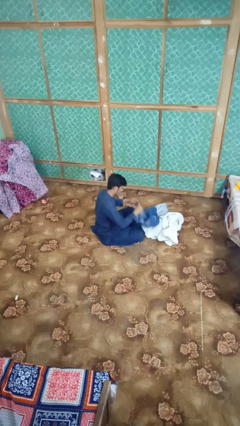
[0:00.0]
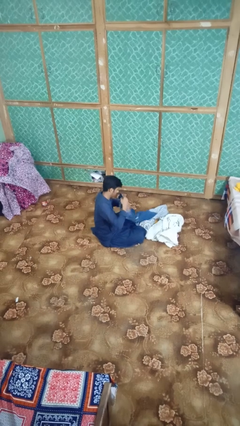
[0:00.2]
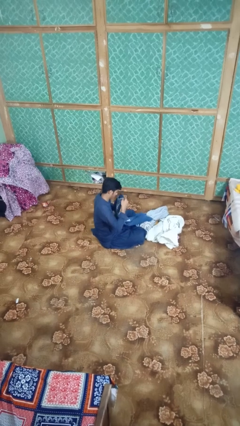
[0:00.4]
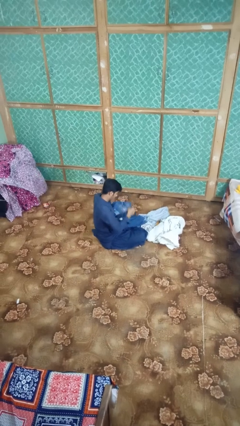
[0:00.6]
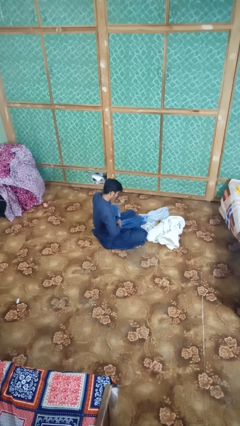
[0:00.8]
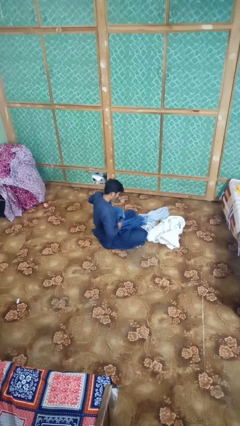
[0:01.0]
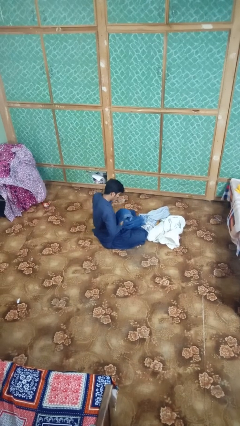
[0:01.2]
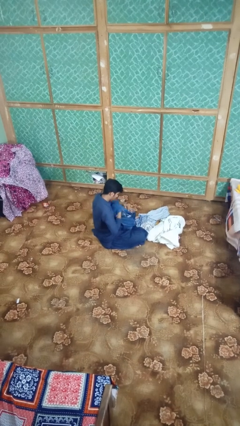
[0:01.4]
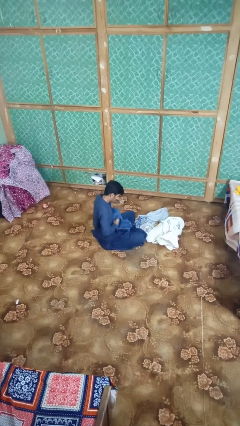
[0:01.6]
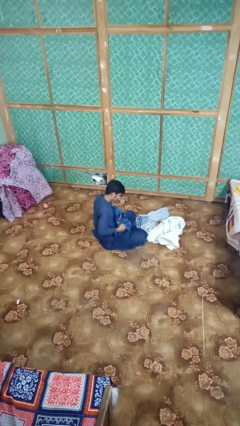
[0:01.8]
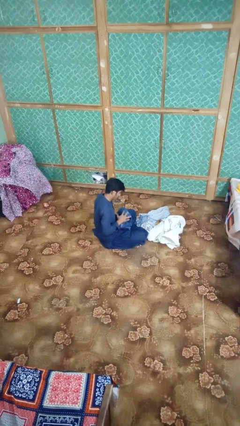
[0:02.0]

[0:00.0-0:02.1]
person folds pants

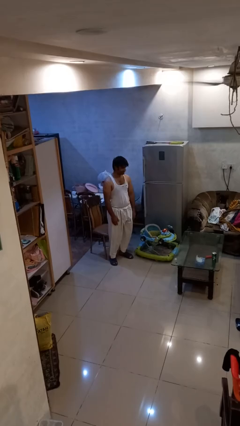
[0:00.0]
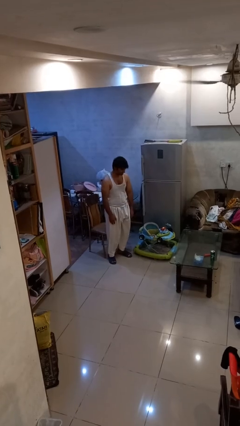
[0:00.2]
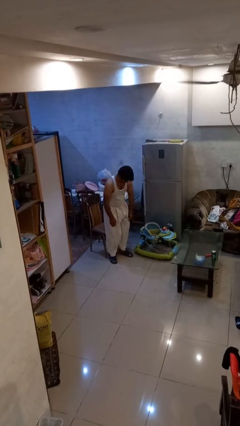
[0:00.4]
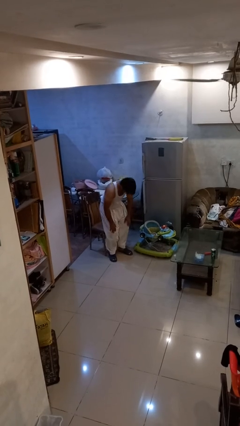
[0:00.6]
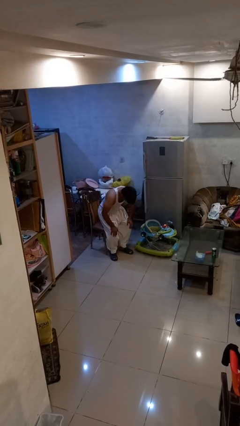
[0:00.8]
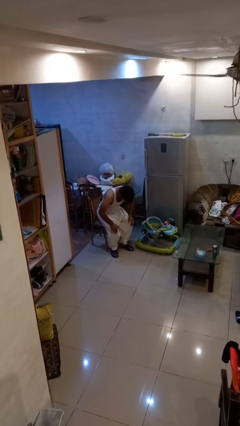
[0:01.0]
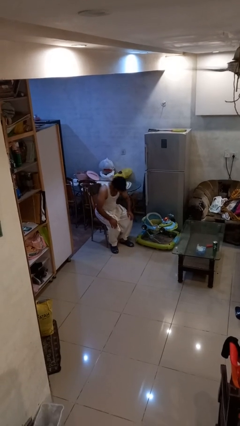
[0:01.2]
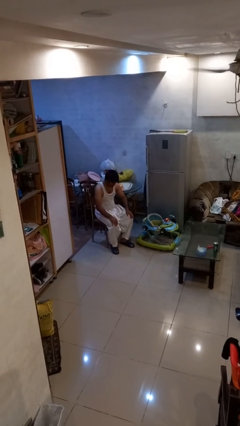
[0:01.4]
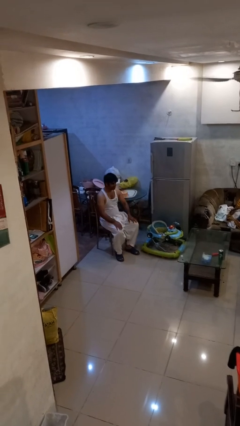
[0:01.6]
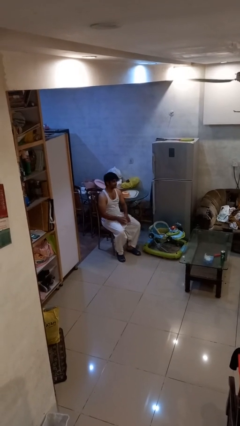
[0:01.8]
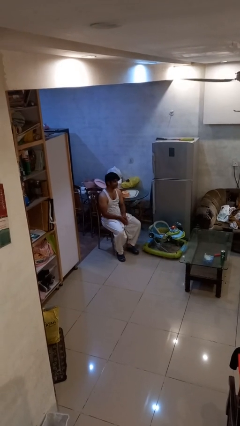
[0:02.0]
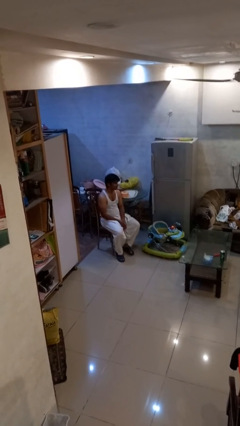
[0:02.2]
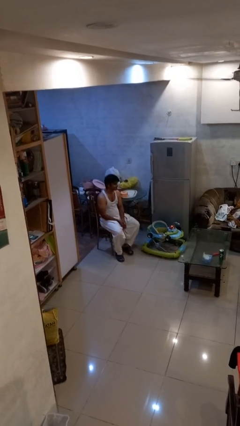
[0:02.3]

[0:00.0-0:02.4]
person sits down

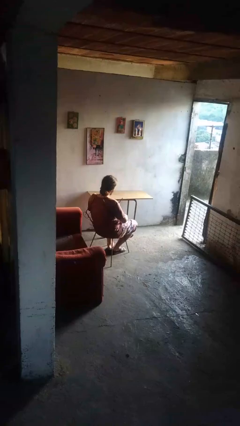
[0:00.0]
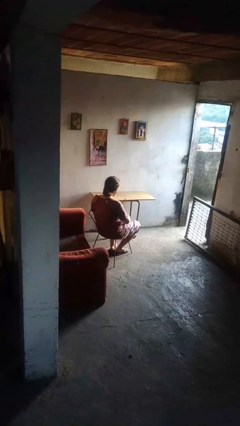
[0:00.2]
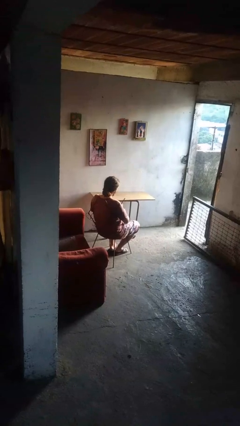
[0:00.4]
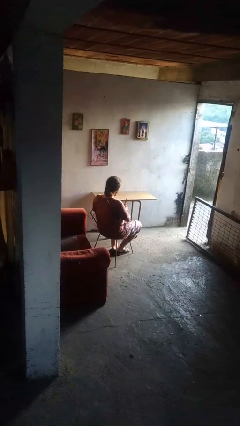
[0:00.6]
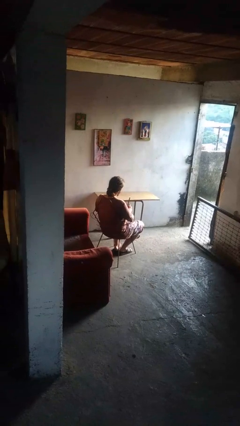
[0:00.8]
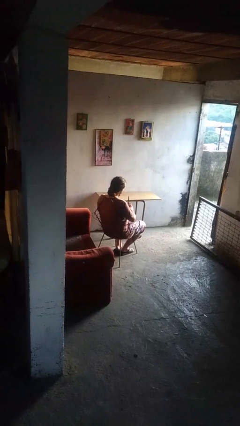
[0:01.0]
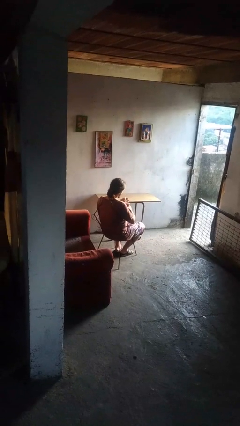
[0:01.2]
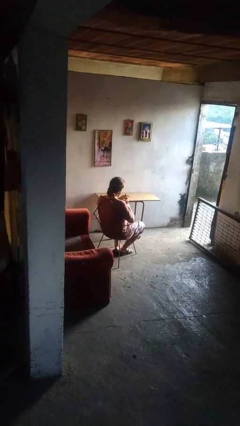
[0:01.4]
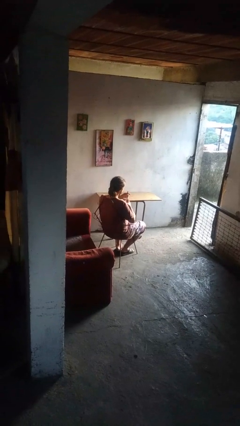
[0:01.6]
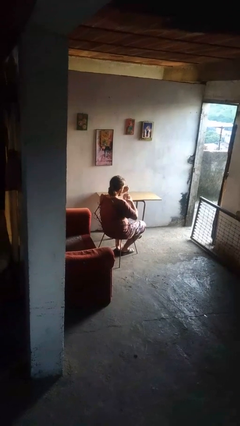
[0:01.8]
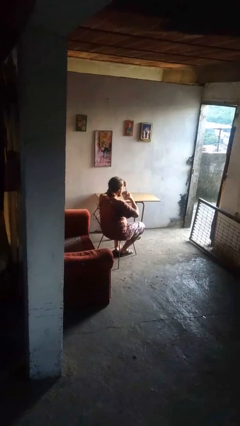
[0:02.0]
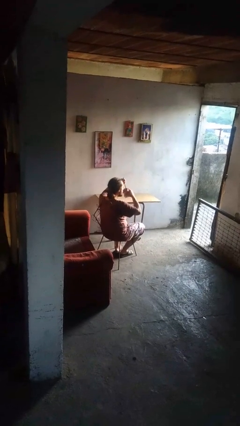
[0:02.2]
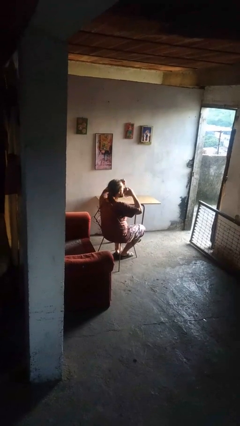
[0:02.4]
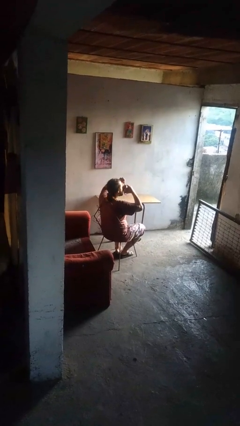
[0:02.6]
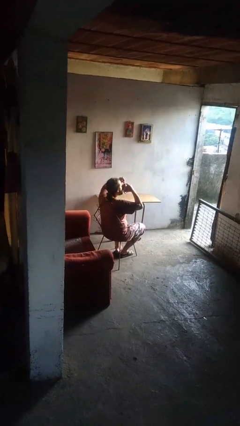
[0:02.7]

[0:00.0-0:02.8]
person drinks from mug

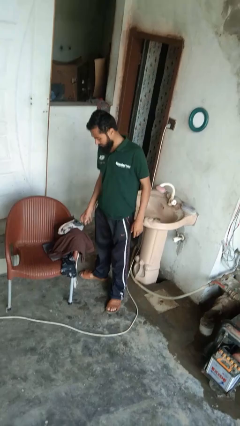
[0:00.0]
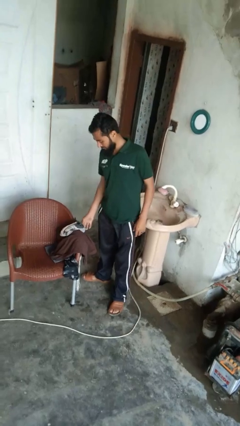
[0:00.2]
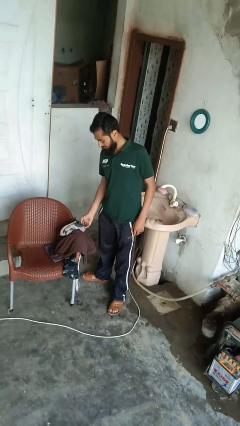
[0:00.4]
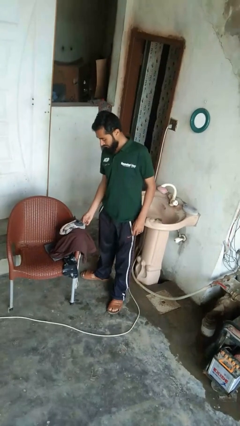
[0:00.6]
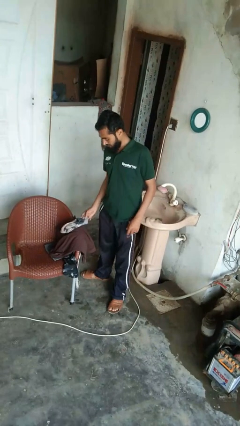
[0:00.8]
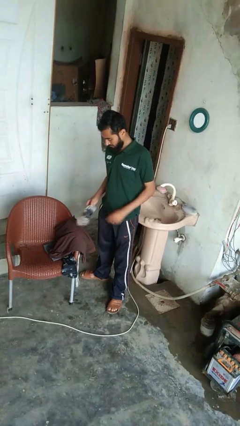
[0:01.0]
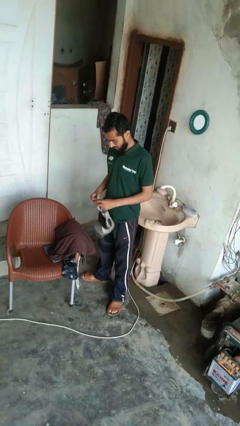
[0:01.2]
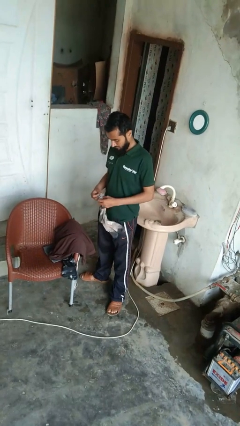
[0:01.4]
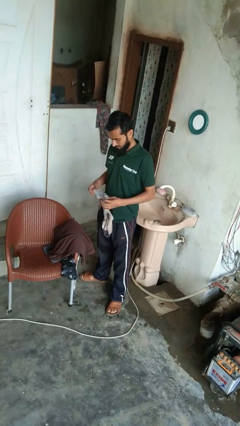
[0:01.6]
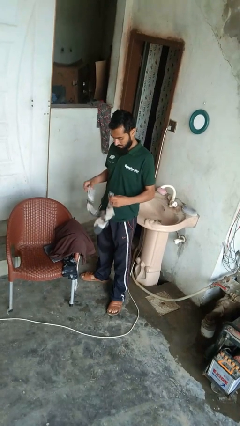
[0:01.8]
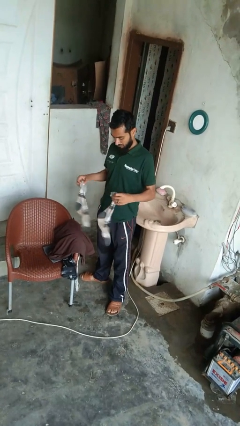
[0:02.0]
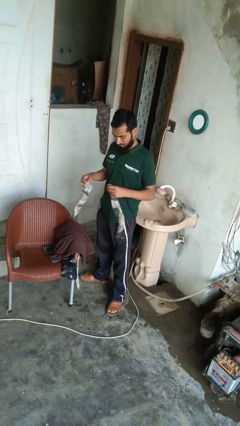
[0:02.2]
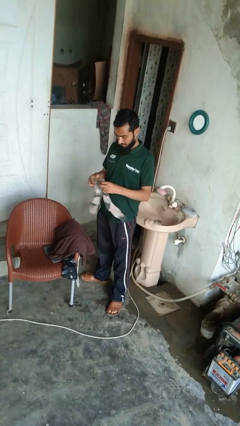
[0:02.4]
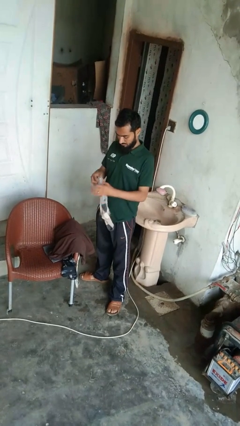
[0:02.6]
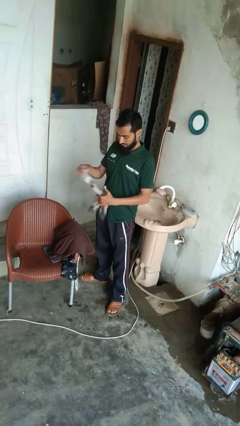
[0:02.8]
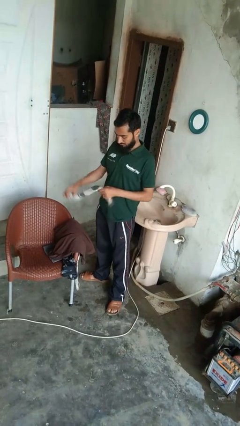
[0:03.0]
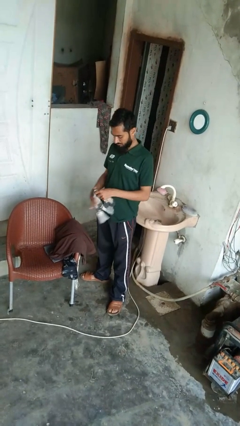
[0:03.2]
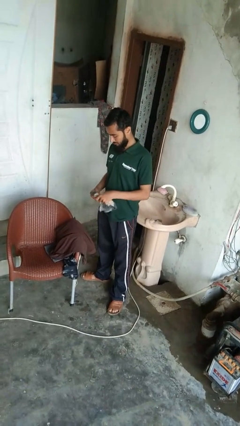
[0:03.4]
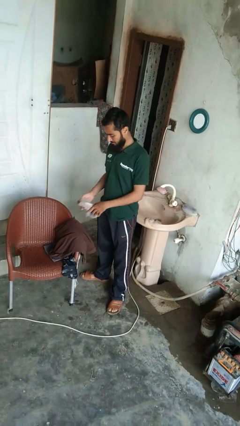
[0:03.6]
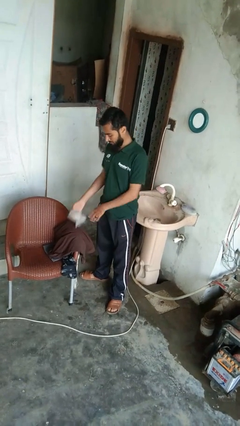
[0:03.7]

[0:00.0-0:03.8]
person folds socks

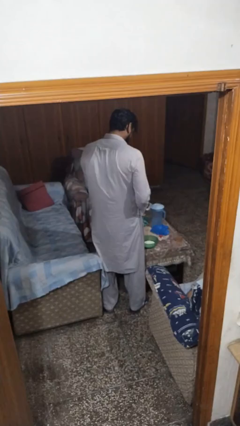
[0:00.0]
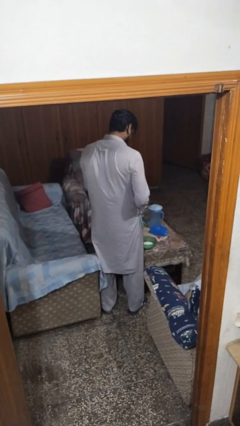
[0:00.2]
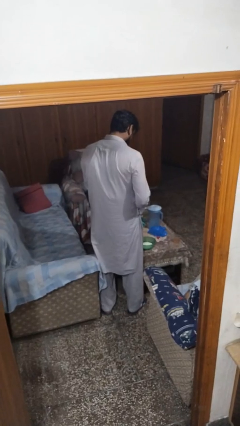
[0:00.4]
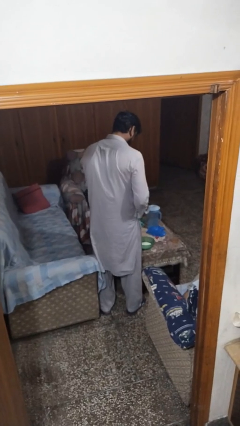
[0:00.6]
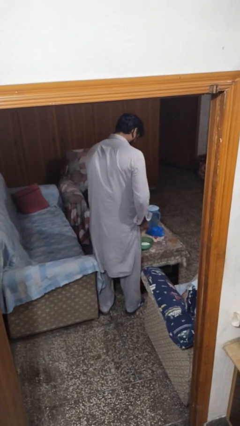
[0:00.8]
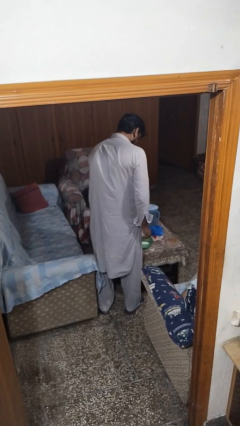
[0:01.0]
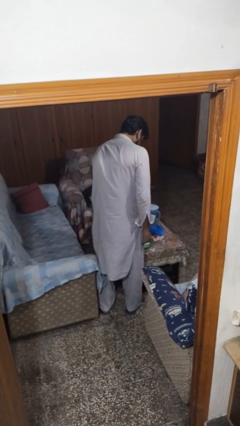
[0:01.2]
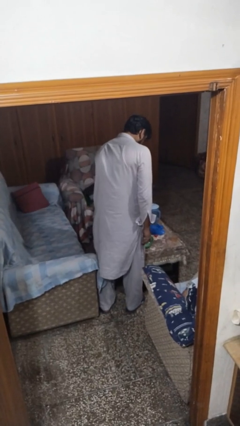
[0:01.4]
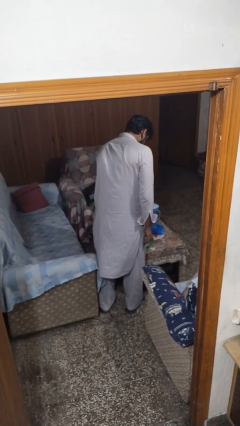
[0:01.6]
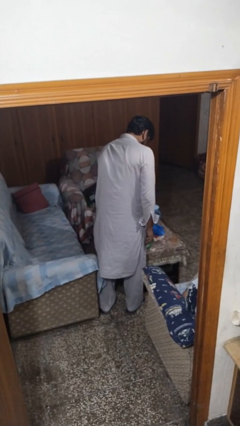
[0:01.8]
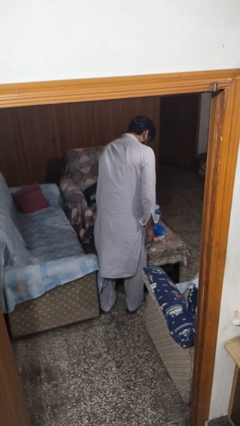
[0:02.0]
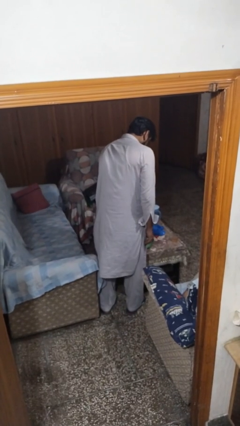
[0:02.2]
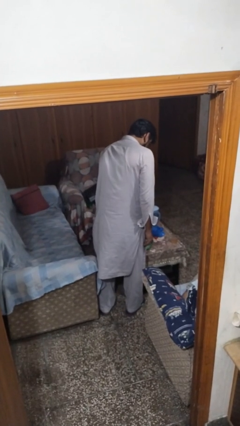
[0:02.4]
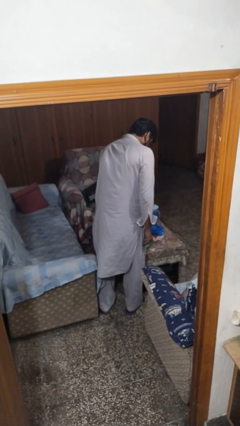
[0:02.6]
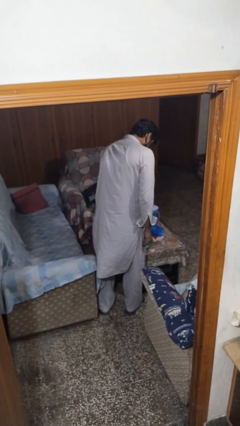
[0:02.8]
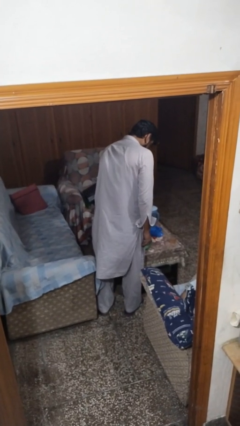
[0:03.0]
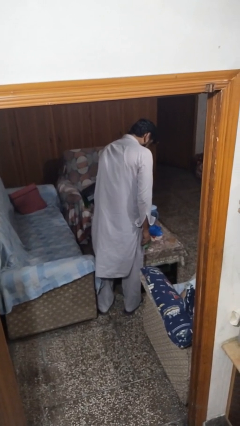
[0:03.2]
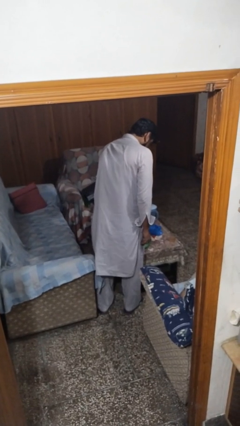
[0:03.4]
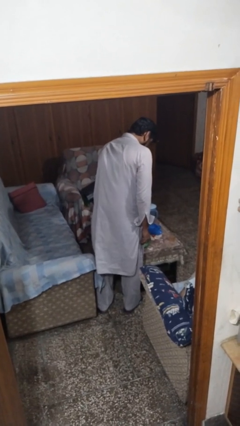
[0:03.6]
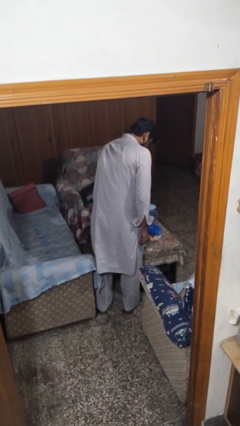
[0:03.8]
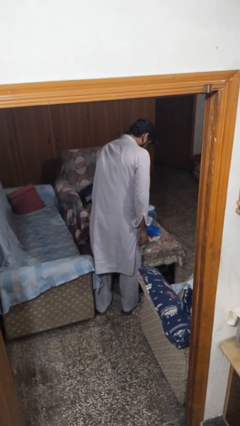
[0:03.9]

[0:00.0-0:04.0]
person pours into bowl

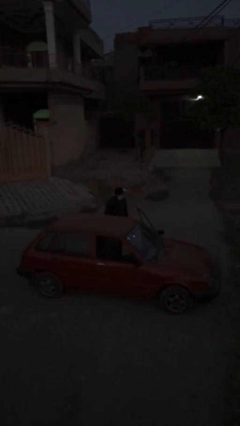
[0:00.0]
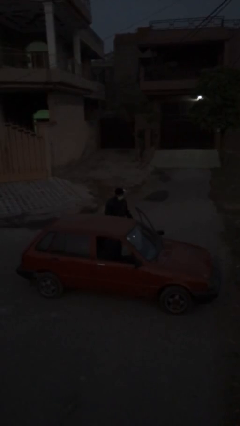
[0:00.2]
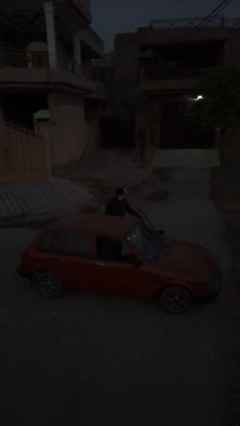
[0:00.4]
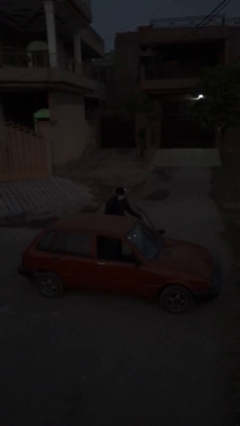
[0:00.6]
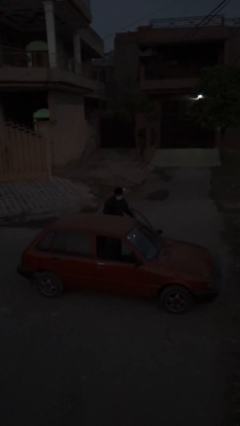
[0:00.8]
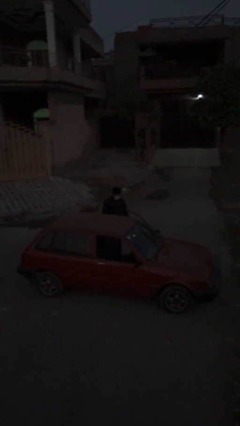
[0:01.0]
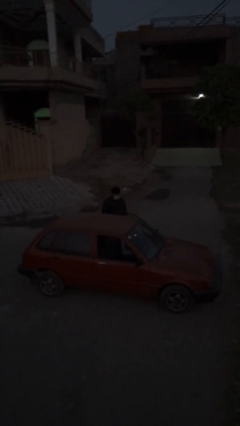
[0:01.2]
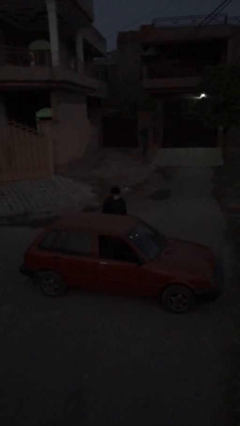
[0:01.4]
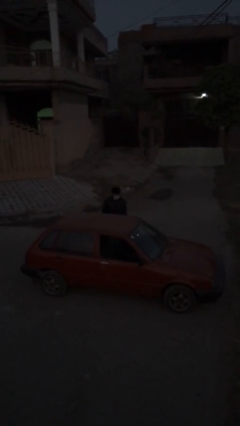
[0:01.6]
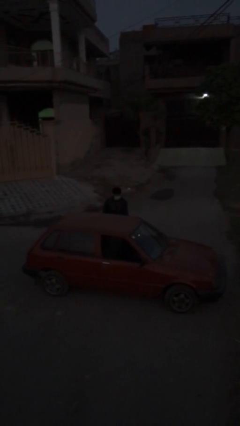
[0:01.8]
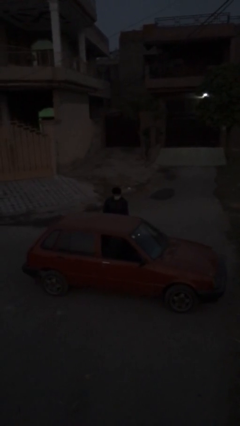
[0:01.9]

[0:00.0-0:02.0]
person closes car door
